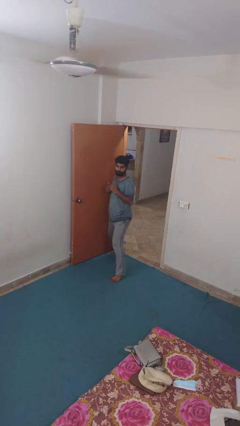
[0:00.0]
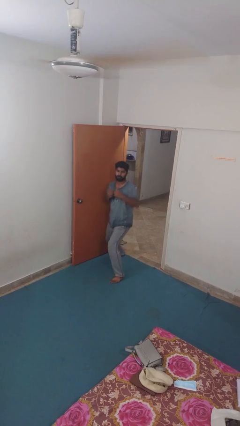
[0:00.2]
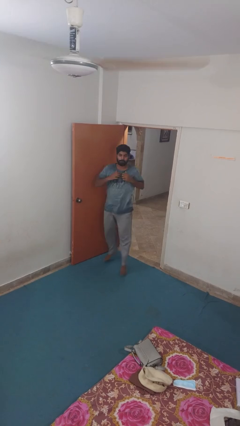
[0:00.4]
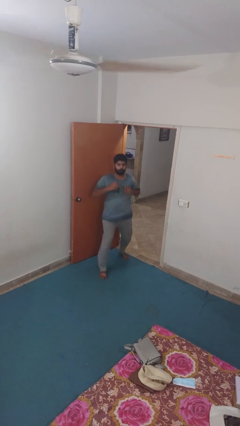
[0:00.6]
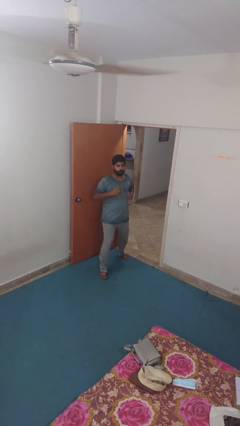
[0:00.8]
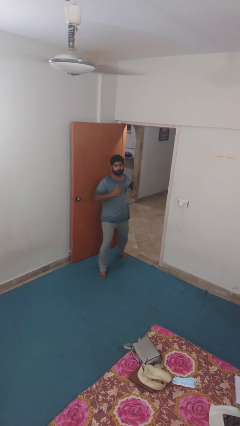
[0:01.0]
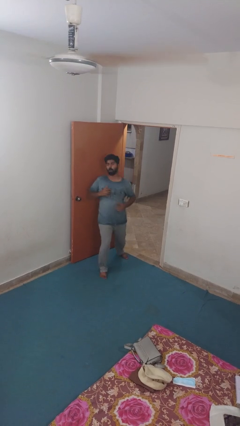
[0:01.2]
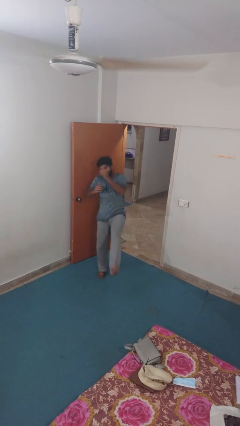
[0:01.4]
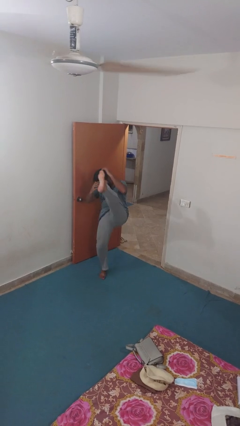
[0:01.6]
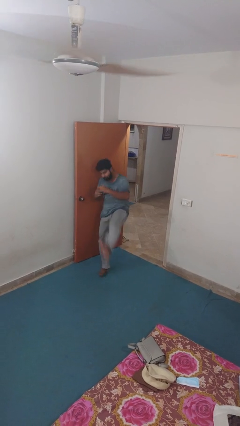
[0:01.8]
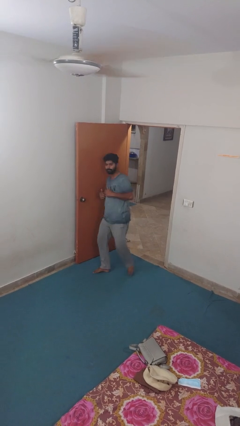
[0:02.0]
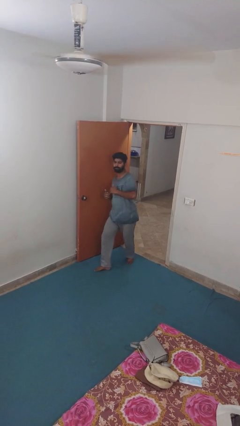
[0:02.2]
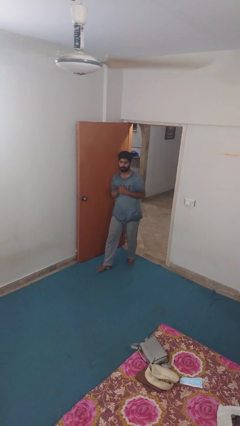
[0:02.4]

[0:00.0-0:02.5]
person karate kicks

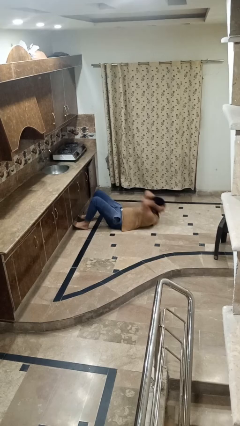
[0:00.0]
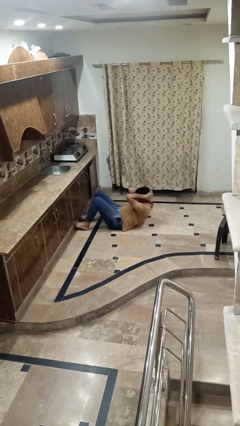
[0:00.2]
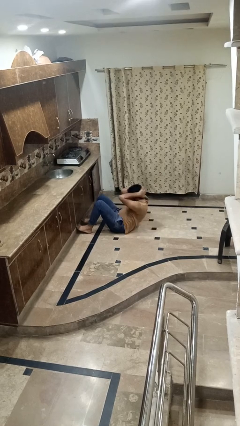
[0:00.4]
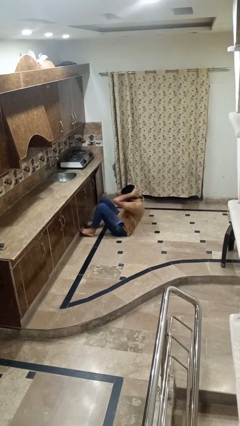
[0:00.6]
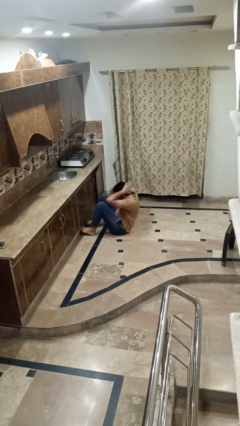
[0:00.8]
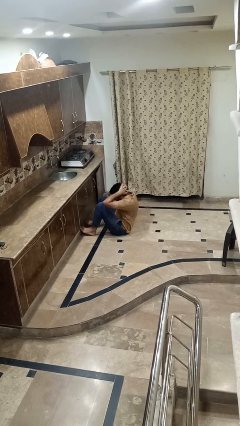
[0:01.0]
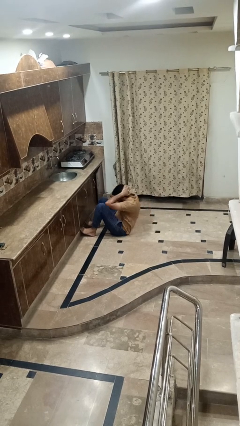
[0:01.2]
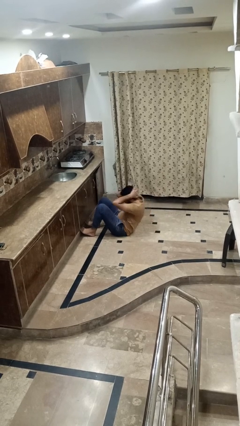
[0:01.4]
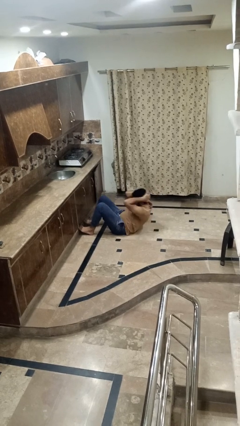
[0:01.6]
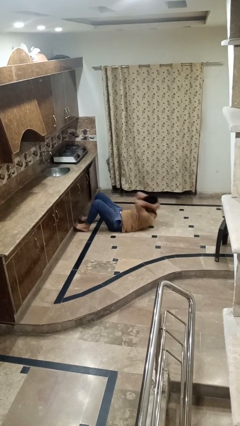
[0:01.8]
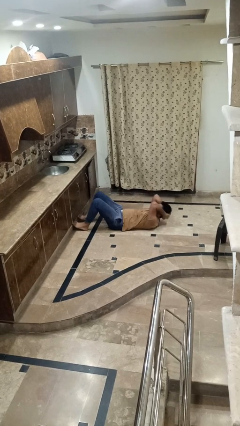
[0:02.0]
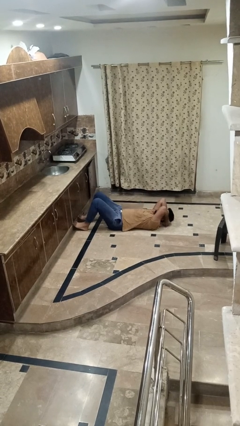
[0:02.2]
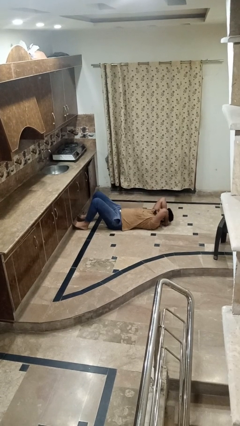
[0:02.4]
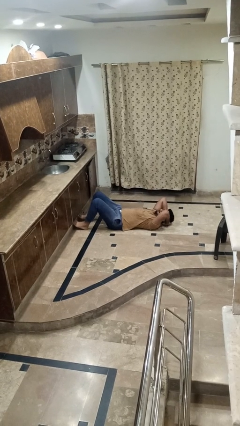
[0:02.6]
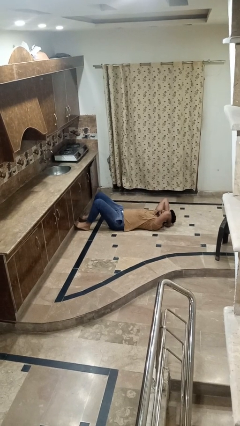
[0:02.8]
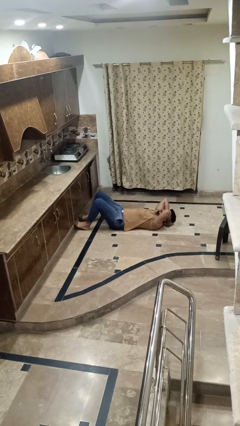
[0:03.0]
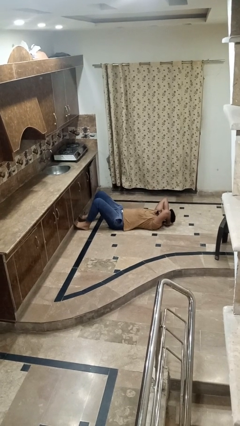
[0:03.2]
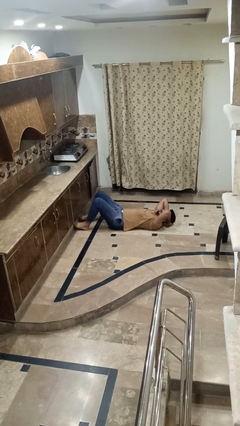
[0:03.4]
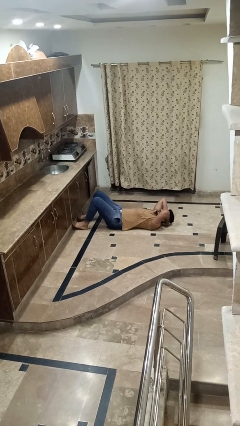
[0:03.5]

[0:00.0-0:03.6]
person exercises with situp

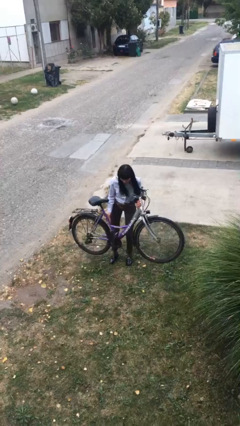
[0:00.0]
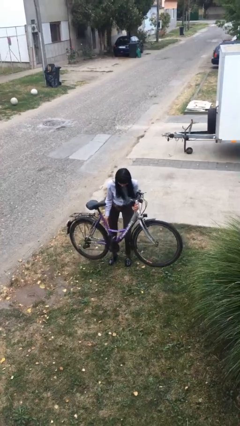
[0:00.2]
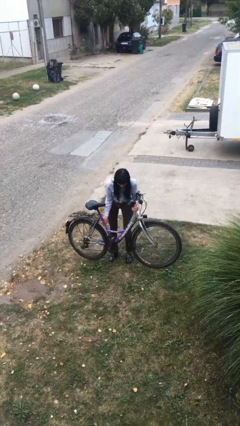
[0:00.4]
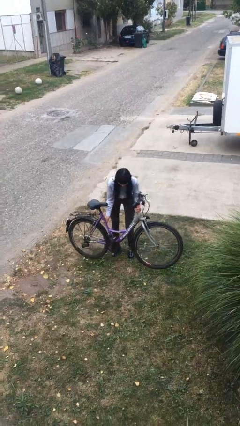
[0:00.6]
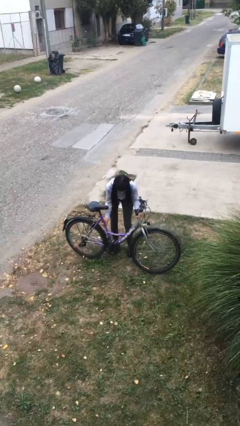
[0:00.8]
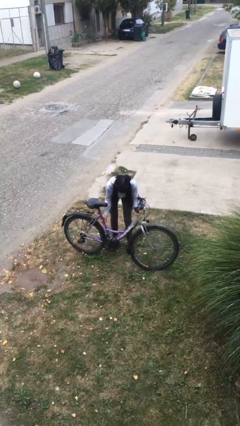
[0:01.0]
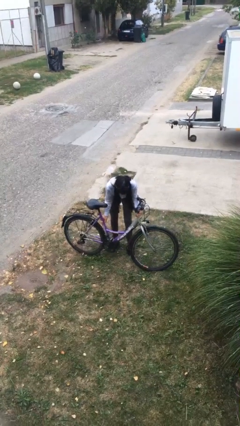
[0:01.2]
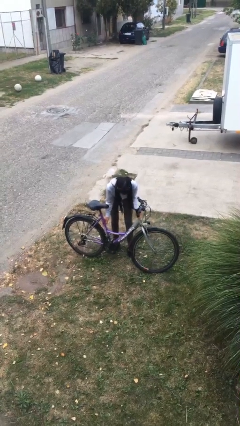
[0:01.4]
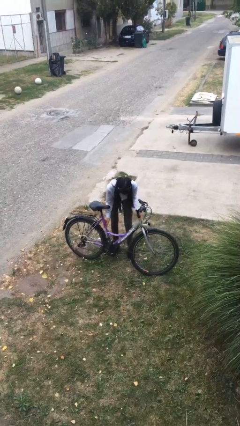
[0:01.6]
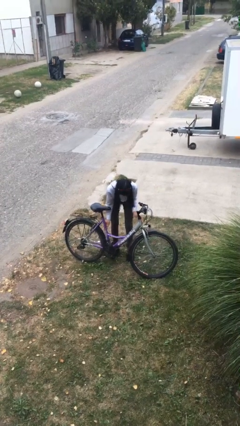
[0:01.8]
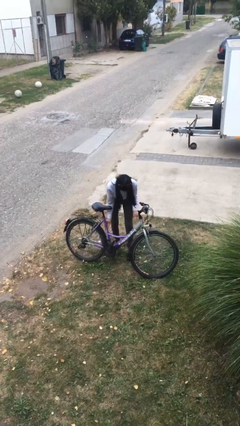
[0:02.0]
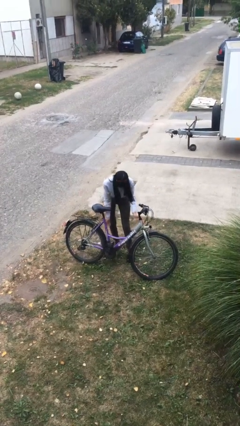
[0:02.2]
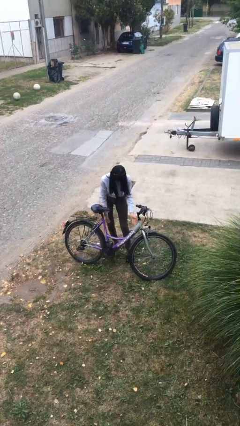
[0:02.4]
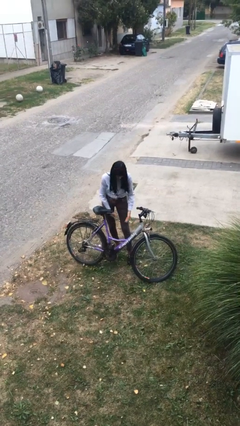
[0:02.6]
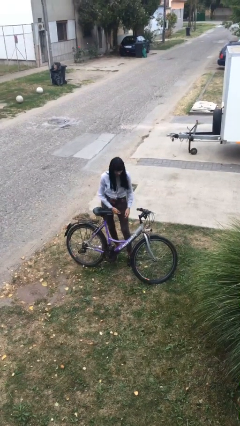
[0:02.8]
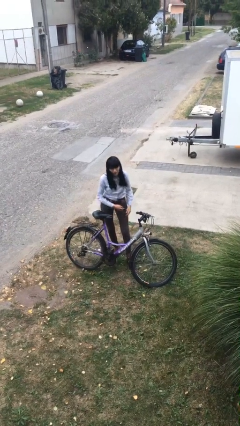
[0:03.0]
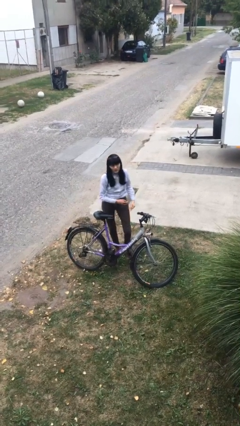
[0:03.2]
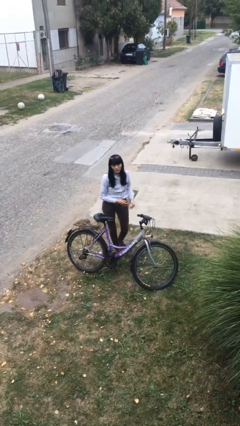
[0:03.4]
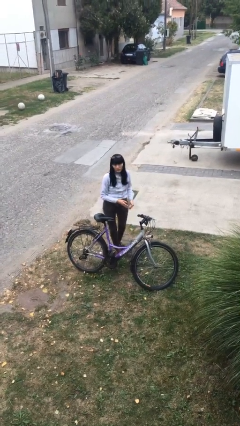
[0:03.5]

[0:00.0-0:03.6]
person puts down object on floor

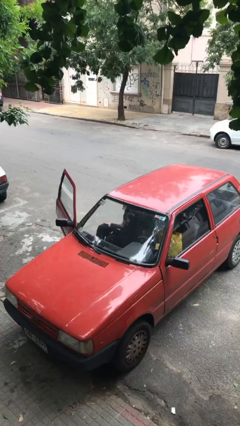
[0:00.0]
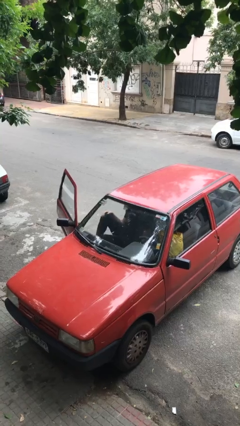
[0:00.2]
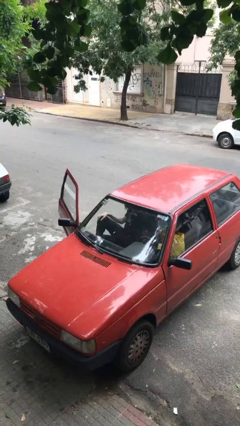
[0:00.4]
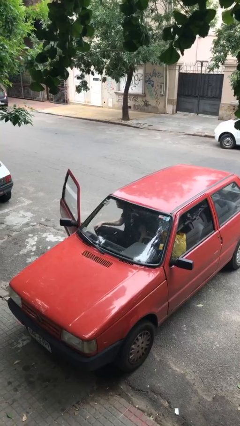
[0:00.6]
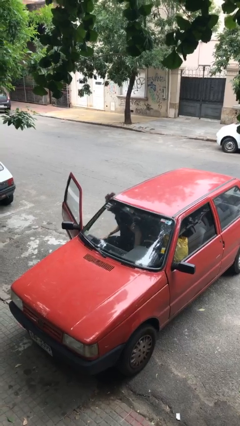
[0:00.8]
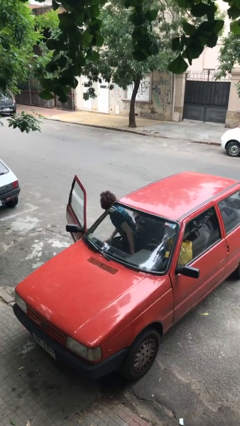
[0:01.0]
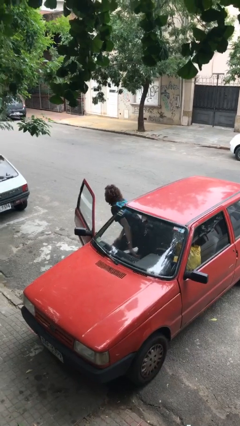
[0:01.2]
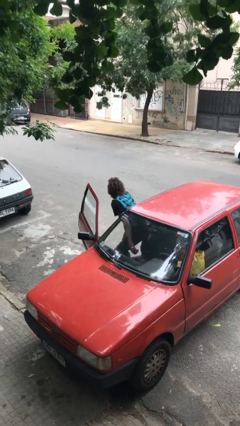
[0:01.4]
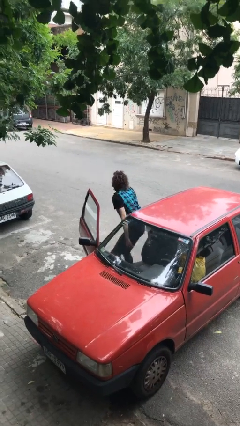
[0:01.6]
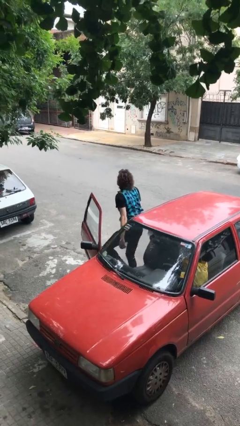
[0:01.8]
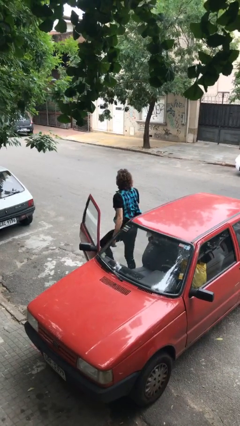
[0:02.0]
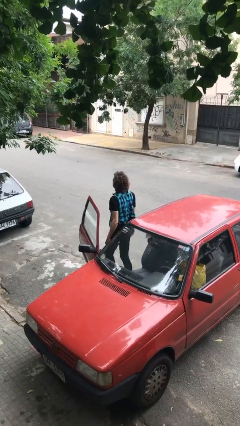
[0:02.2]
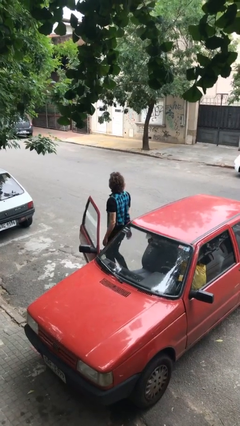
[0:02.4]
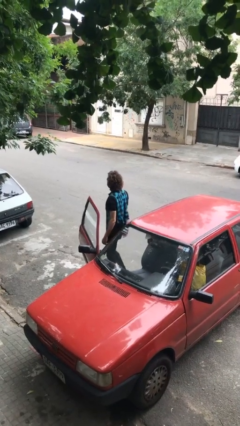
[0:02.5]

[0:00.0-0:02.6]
person exits car

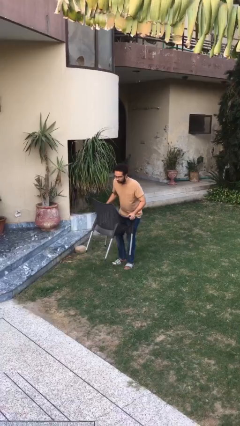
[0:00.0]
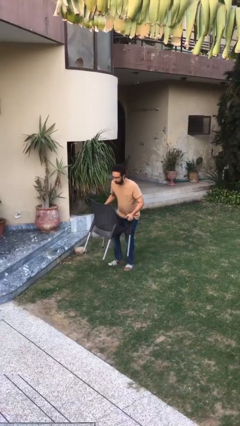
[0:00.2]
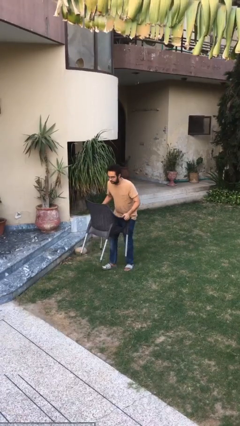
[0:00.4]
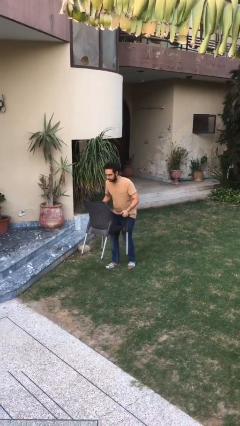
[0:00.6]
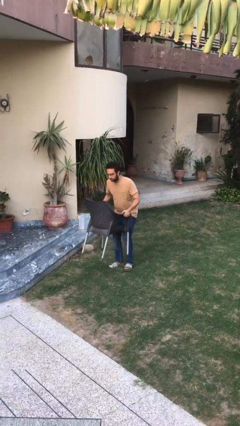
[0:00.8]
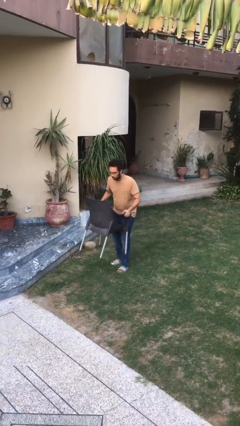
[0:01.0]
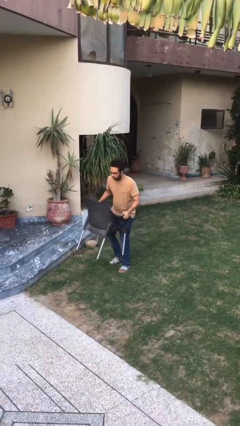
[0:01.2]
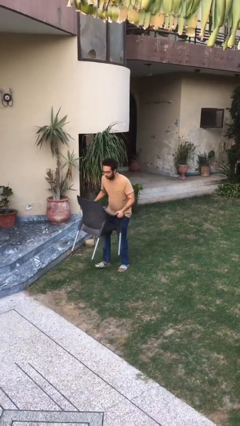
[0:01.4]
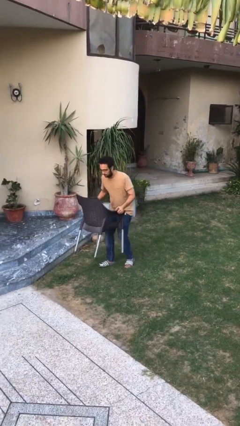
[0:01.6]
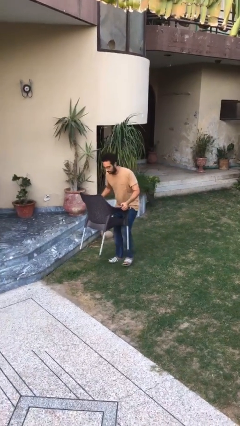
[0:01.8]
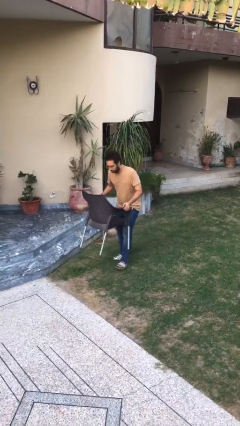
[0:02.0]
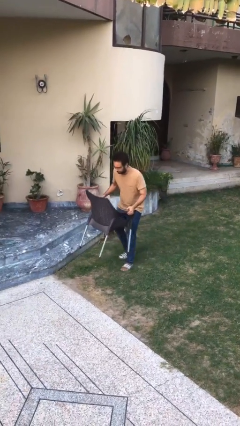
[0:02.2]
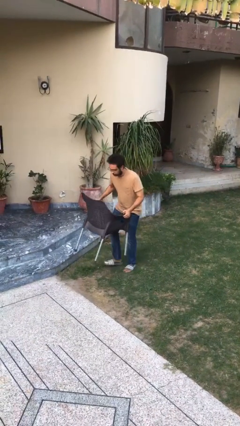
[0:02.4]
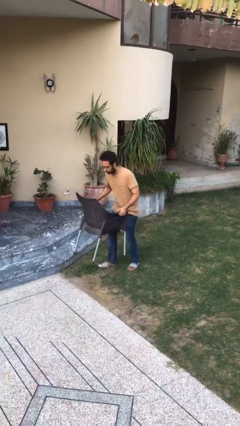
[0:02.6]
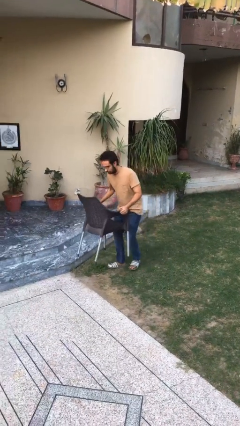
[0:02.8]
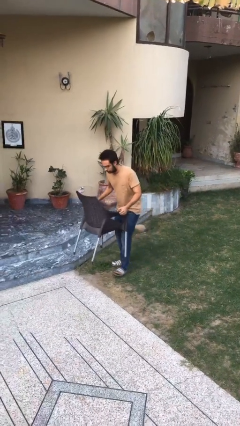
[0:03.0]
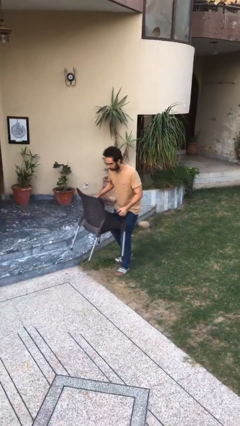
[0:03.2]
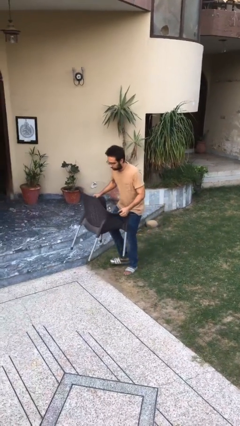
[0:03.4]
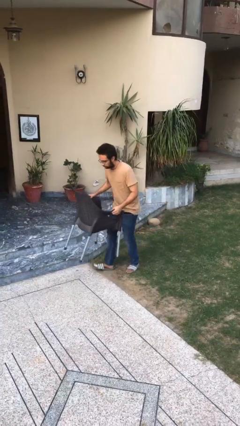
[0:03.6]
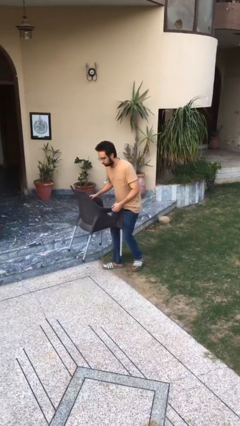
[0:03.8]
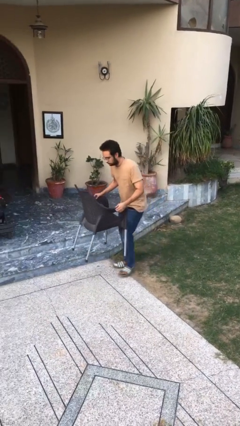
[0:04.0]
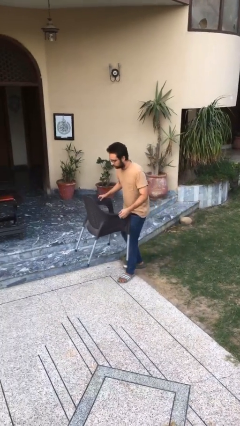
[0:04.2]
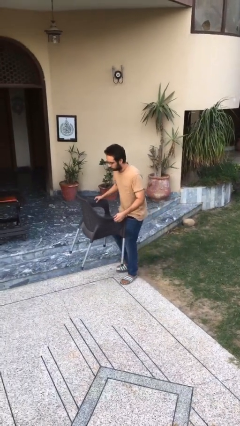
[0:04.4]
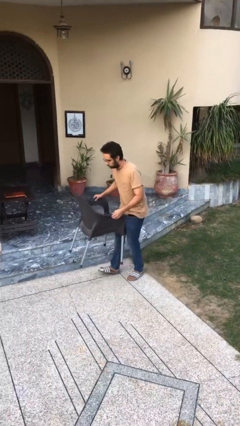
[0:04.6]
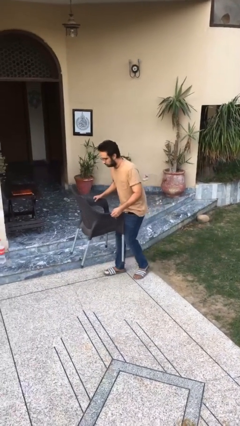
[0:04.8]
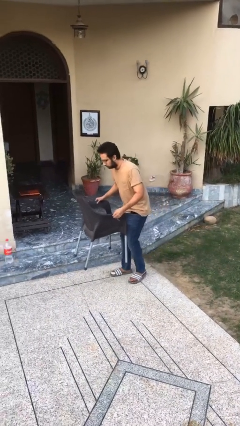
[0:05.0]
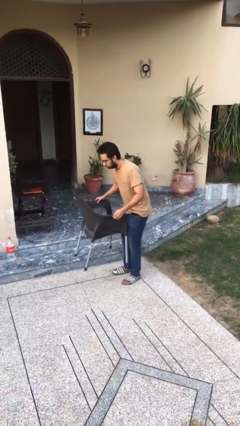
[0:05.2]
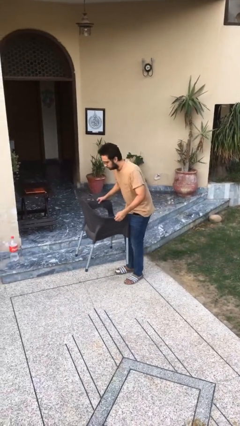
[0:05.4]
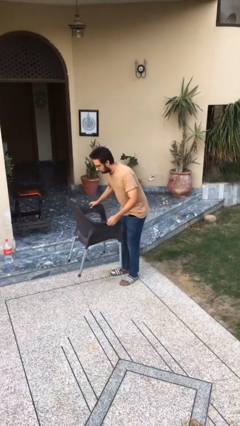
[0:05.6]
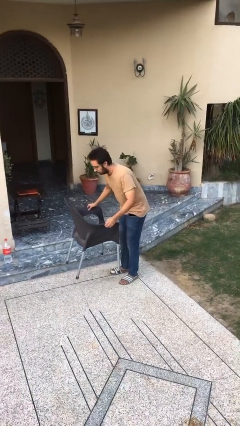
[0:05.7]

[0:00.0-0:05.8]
person carries heavy object
